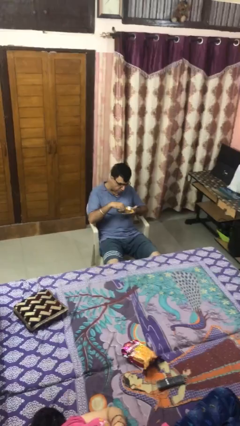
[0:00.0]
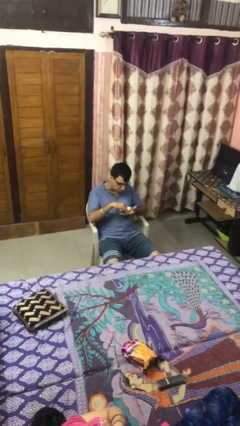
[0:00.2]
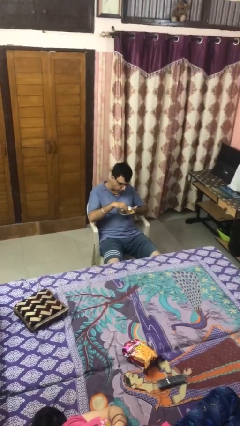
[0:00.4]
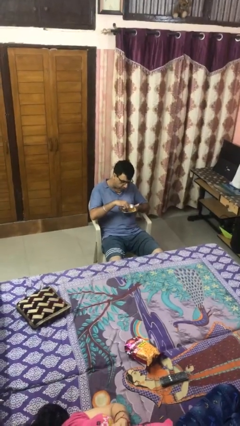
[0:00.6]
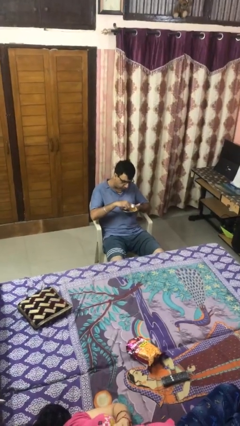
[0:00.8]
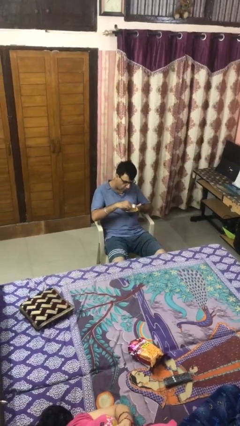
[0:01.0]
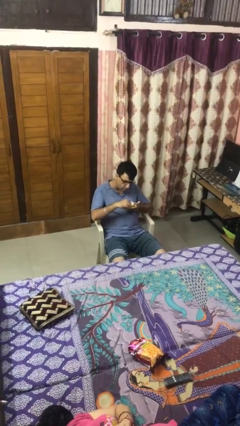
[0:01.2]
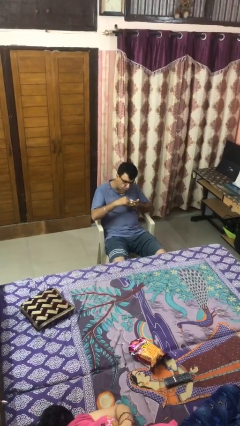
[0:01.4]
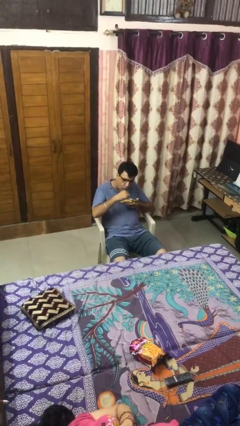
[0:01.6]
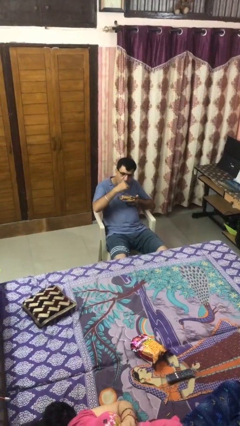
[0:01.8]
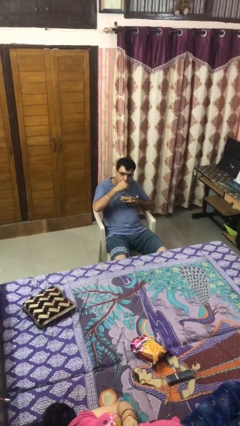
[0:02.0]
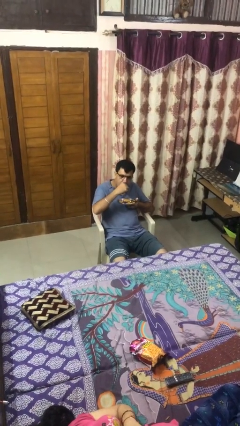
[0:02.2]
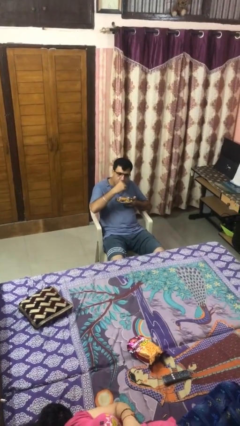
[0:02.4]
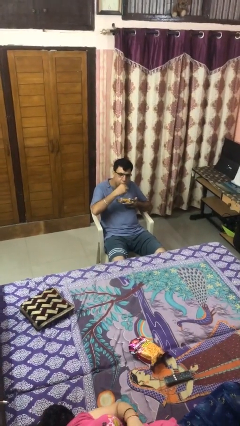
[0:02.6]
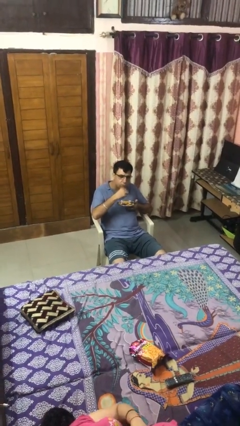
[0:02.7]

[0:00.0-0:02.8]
person eats with hands

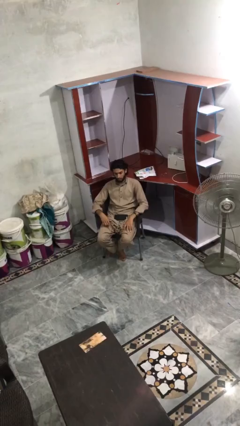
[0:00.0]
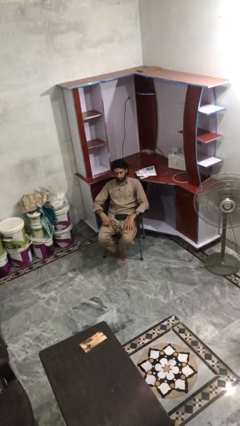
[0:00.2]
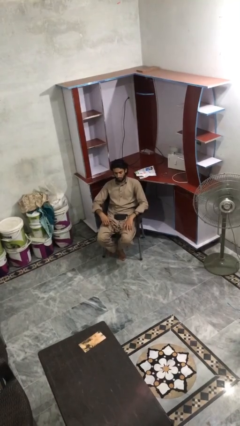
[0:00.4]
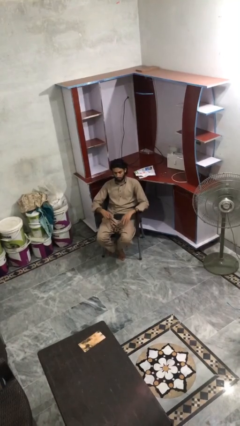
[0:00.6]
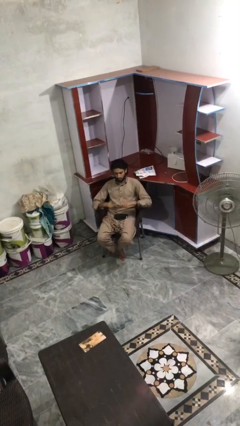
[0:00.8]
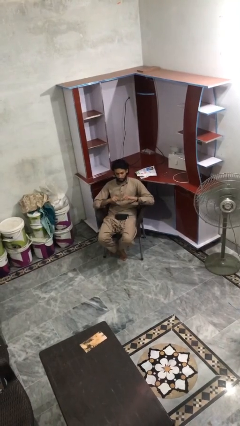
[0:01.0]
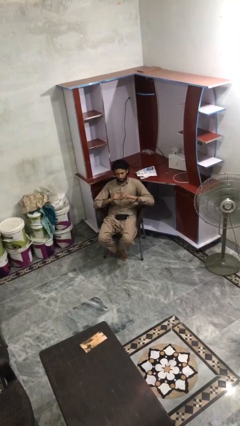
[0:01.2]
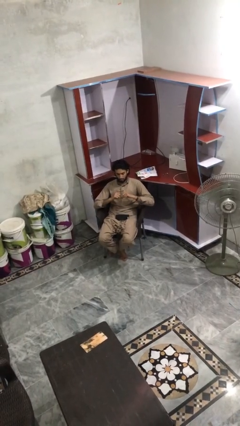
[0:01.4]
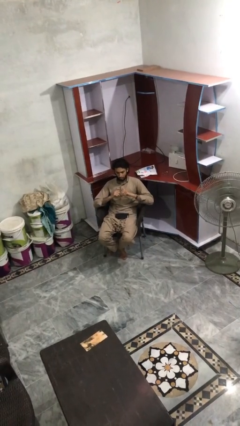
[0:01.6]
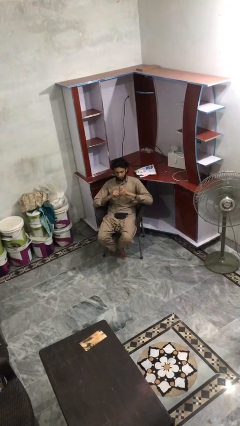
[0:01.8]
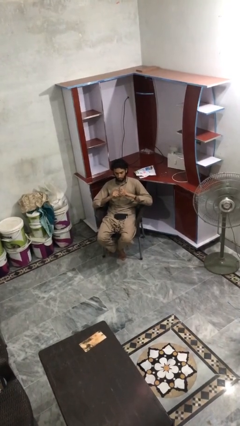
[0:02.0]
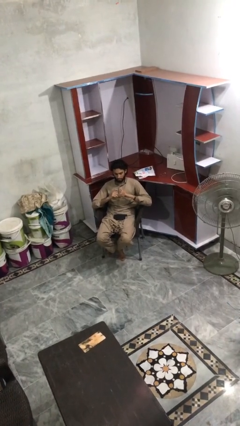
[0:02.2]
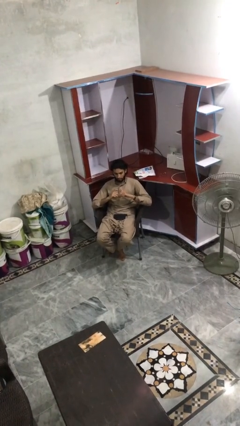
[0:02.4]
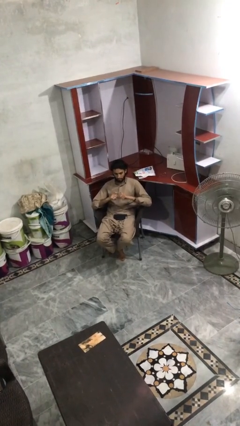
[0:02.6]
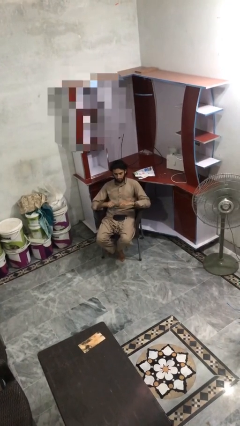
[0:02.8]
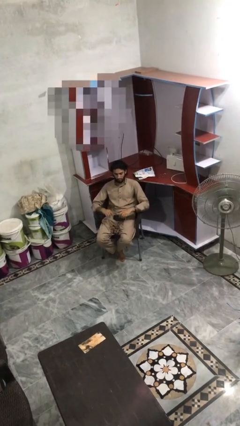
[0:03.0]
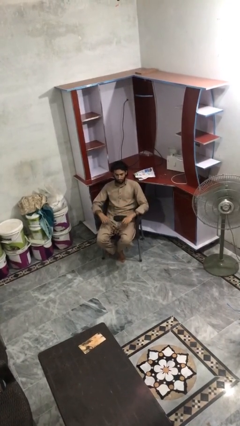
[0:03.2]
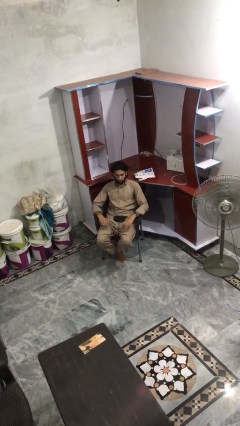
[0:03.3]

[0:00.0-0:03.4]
person gestures heart

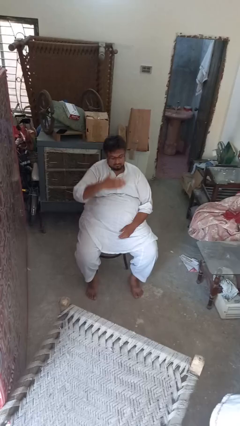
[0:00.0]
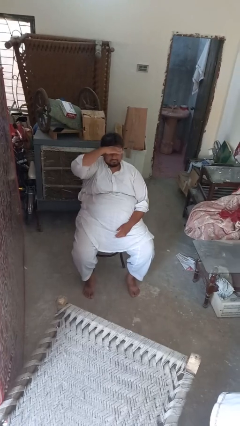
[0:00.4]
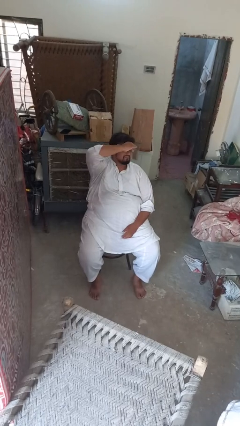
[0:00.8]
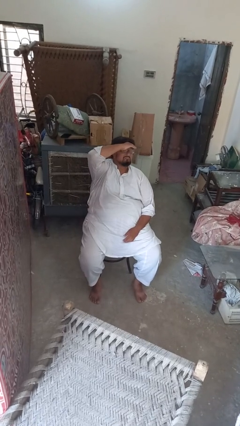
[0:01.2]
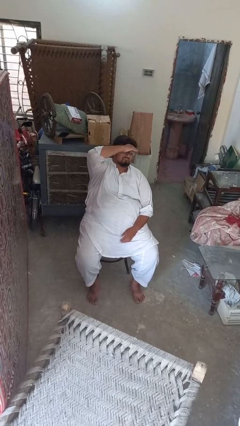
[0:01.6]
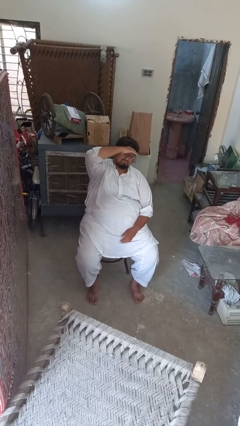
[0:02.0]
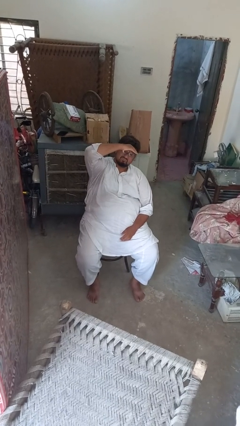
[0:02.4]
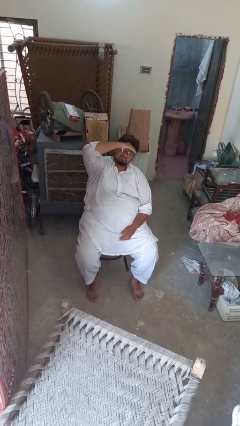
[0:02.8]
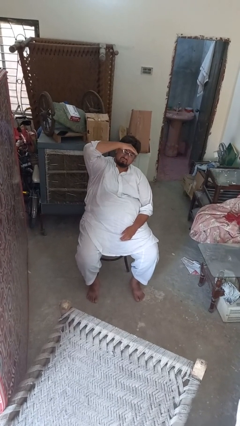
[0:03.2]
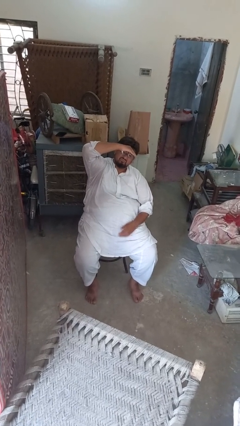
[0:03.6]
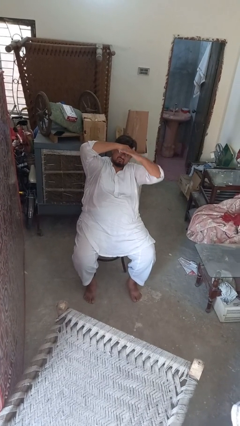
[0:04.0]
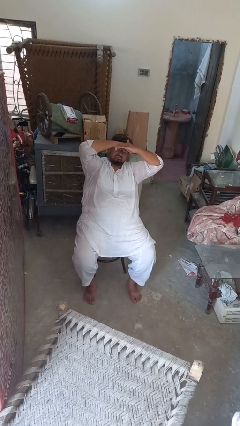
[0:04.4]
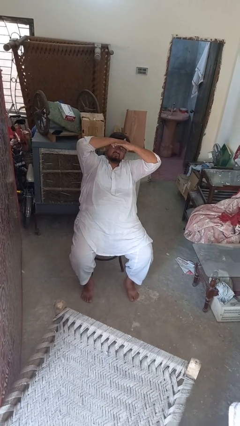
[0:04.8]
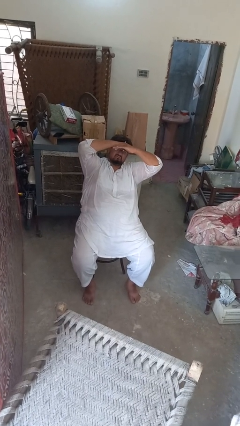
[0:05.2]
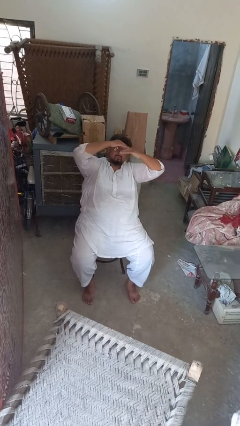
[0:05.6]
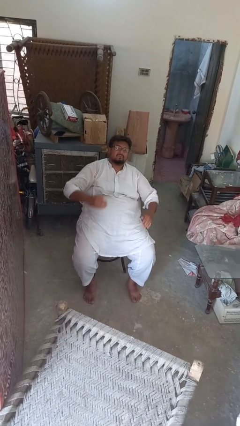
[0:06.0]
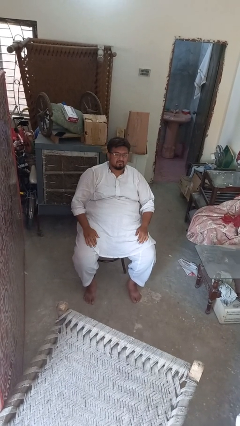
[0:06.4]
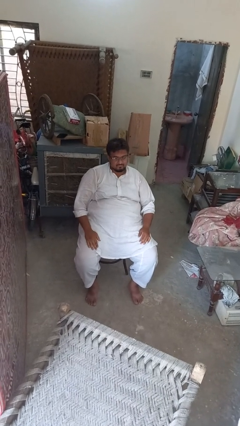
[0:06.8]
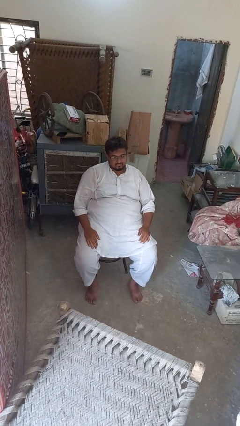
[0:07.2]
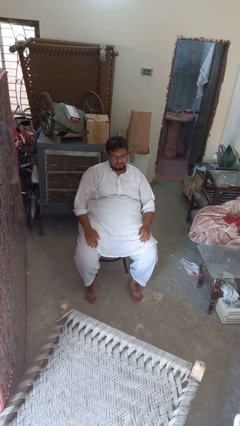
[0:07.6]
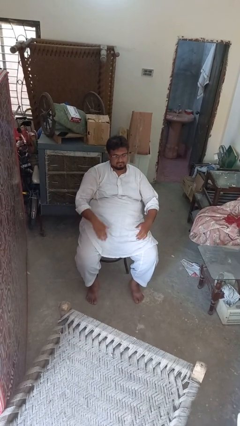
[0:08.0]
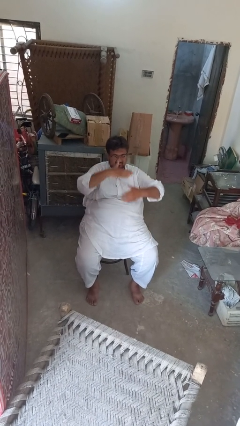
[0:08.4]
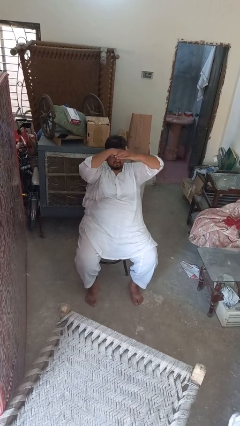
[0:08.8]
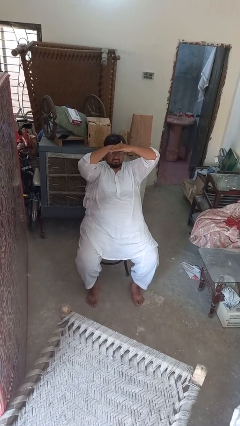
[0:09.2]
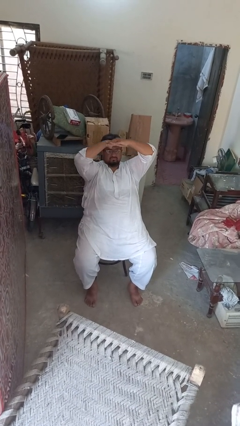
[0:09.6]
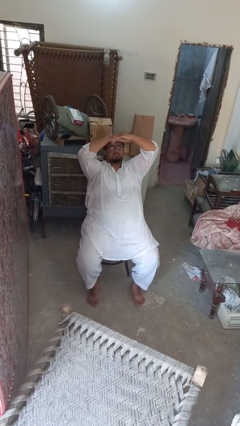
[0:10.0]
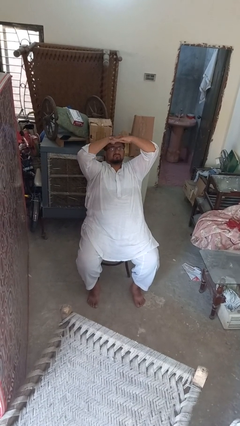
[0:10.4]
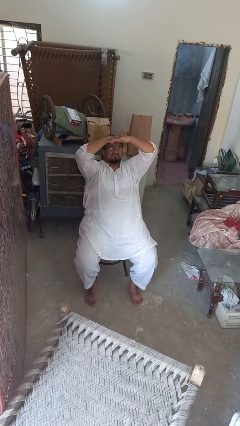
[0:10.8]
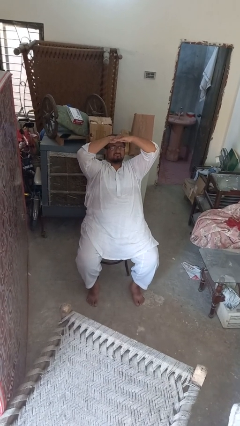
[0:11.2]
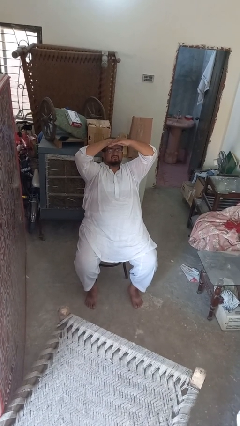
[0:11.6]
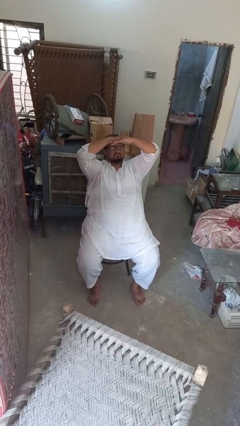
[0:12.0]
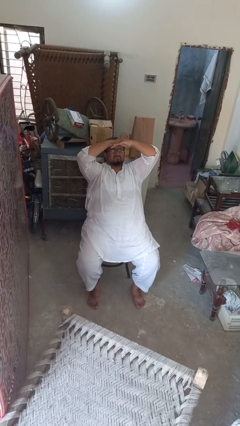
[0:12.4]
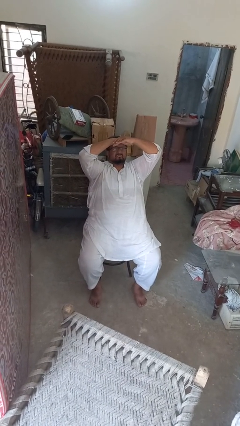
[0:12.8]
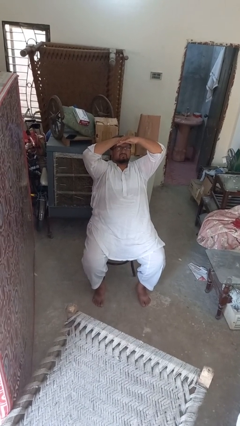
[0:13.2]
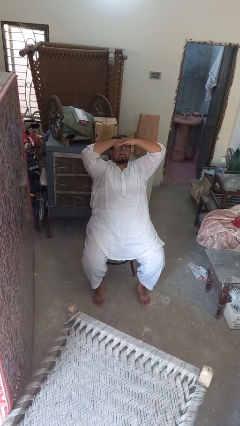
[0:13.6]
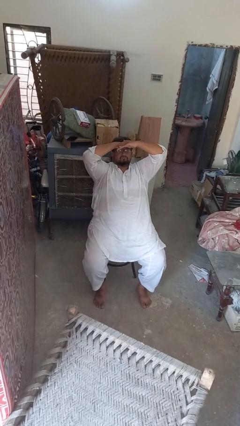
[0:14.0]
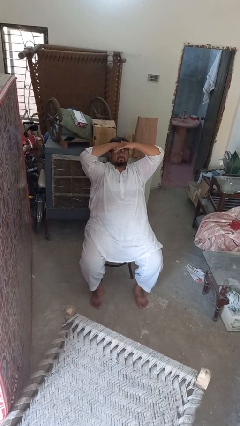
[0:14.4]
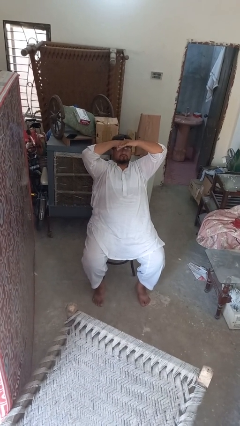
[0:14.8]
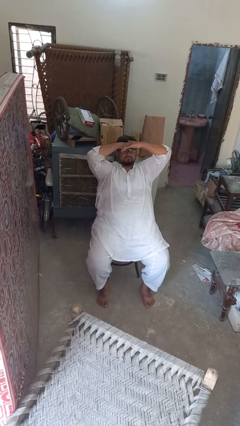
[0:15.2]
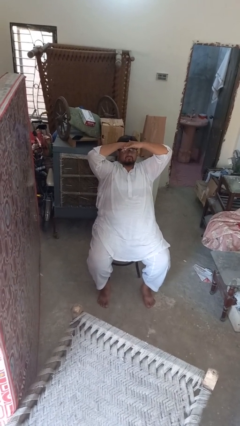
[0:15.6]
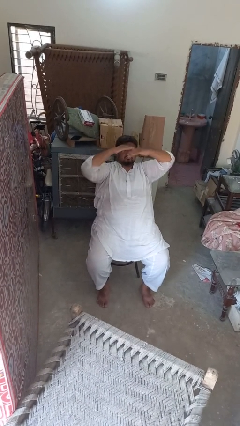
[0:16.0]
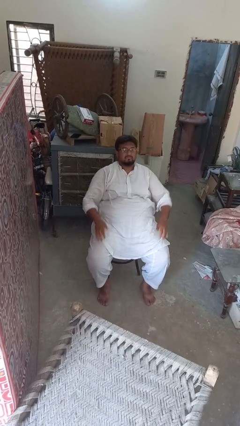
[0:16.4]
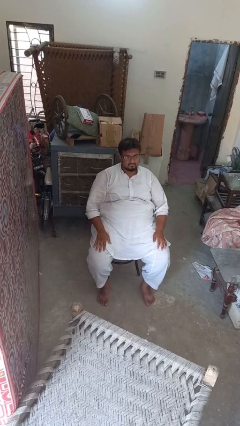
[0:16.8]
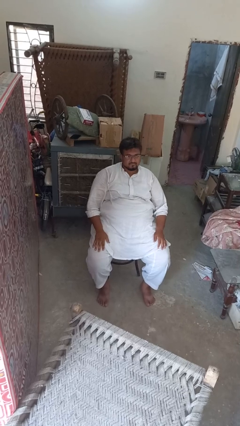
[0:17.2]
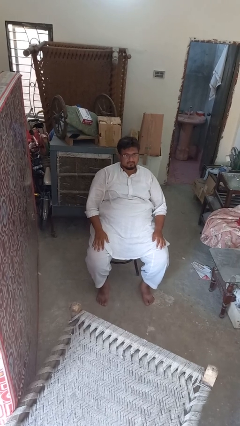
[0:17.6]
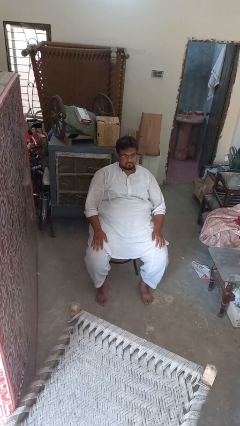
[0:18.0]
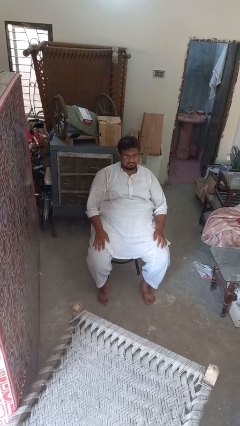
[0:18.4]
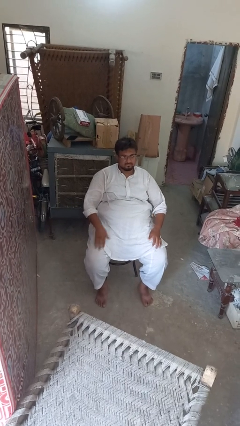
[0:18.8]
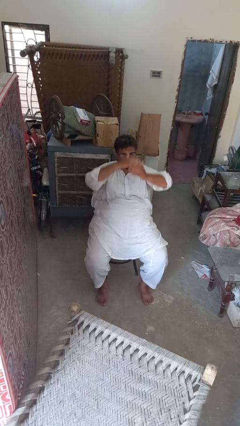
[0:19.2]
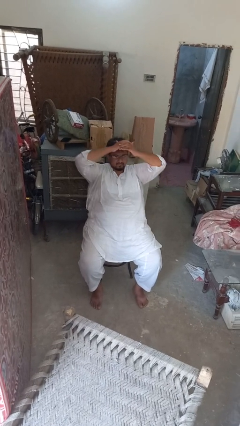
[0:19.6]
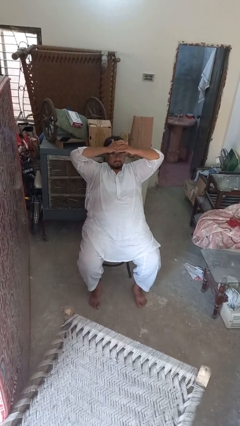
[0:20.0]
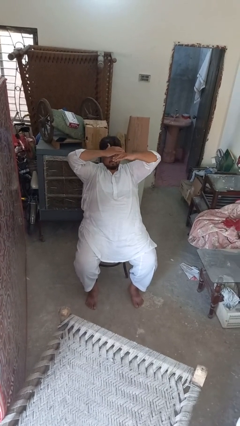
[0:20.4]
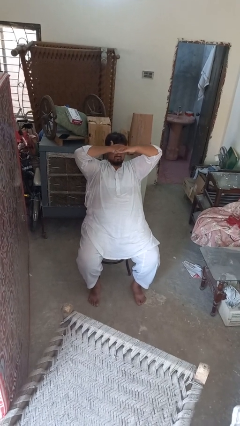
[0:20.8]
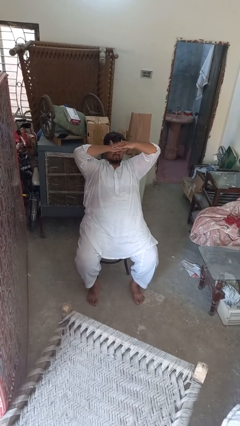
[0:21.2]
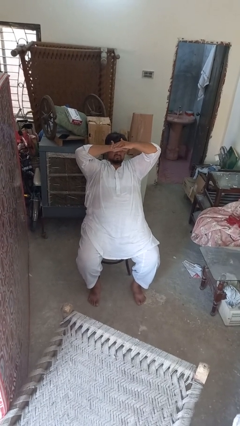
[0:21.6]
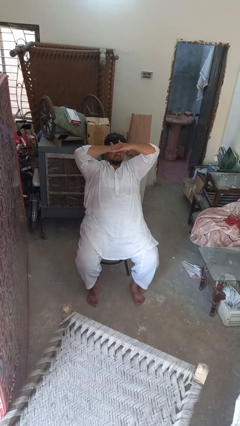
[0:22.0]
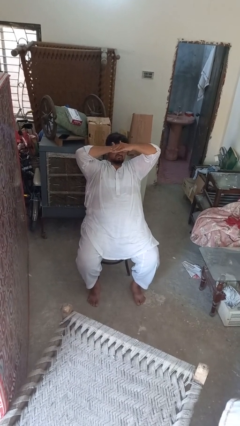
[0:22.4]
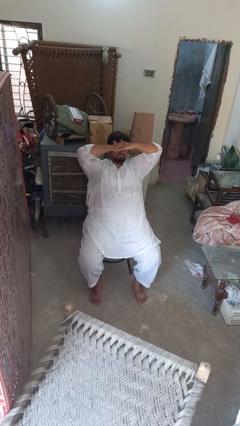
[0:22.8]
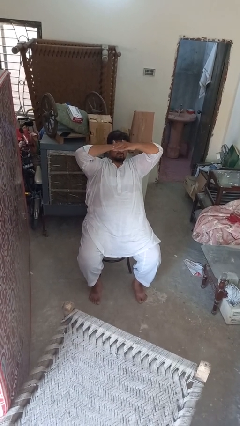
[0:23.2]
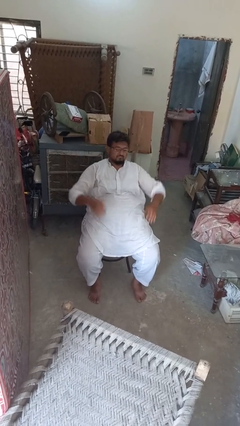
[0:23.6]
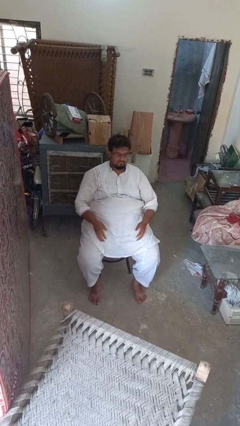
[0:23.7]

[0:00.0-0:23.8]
person shades eyes
